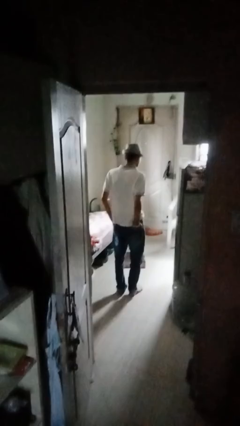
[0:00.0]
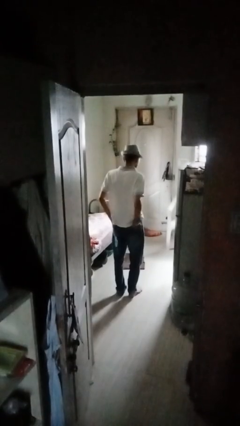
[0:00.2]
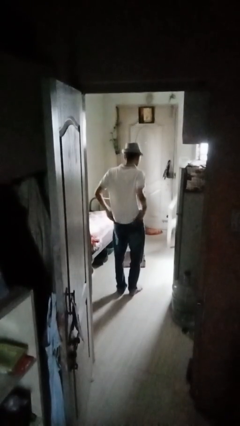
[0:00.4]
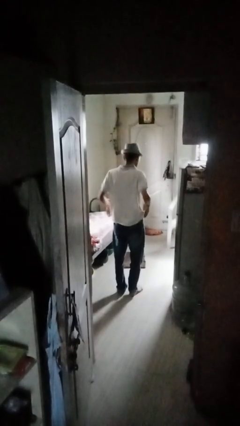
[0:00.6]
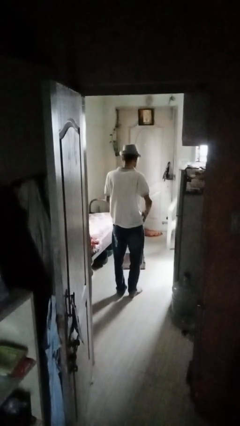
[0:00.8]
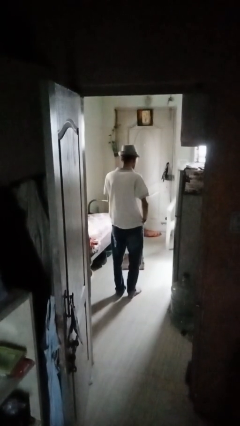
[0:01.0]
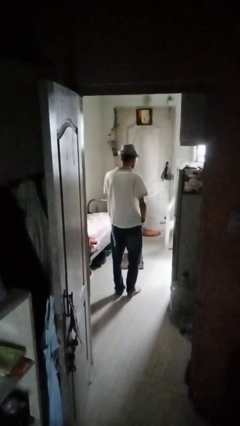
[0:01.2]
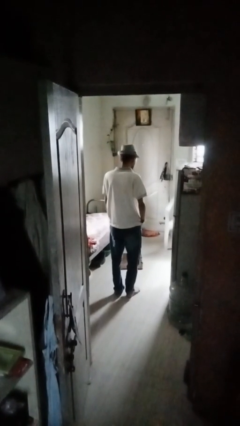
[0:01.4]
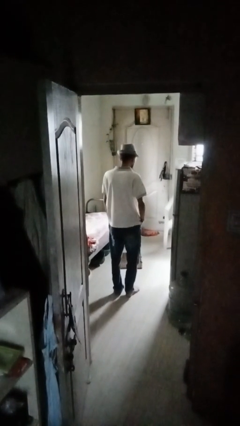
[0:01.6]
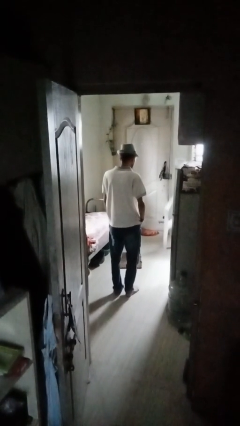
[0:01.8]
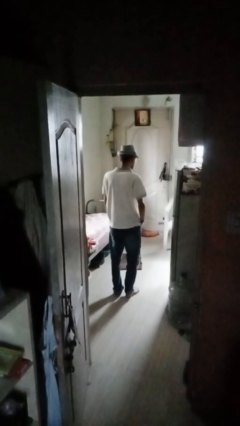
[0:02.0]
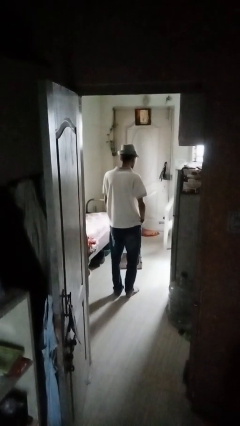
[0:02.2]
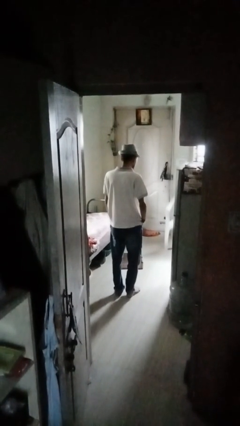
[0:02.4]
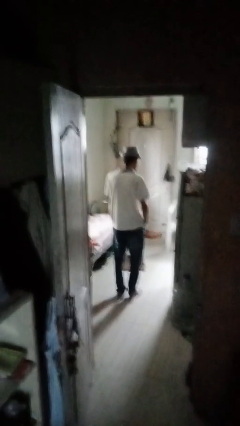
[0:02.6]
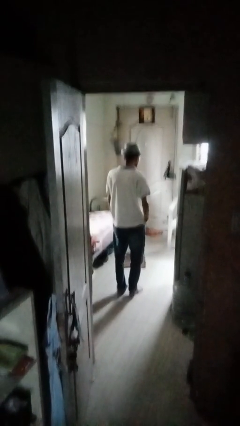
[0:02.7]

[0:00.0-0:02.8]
person puts hands in back pockets

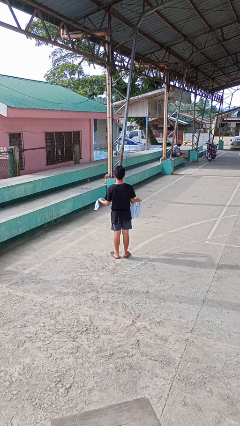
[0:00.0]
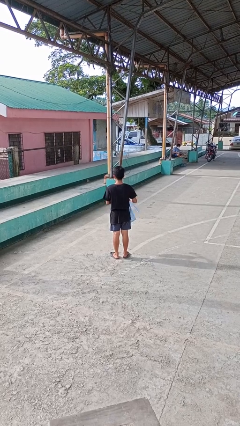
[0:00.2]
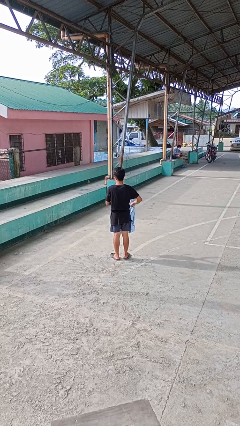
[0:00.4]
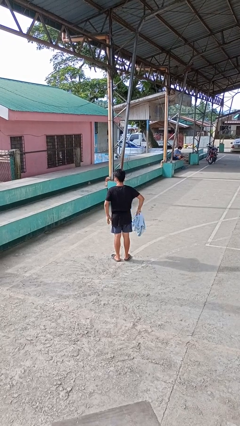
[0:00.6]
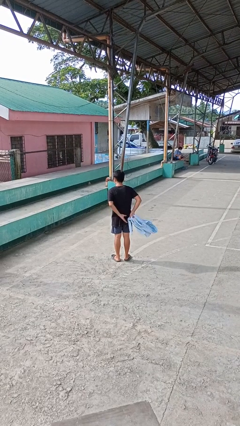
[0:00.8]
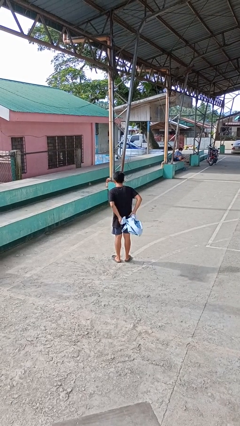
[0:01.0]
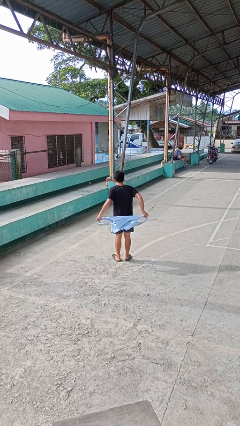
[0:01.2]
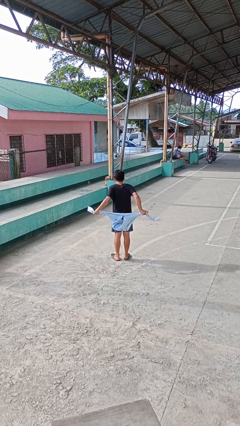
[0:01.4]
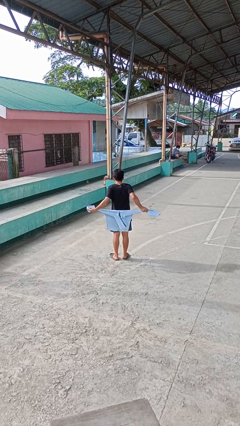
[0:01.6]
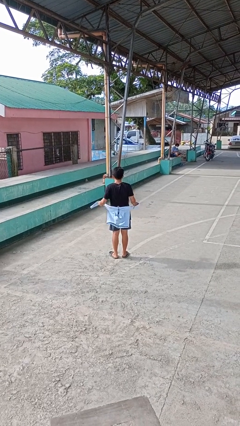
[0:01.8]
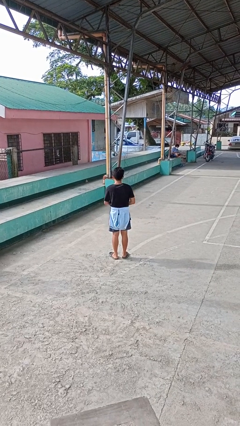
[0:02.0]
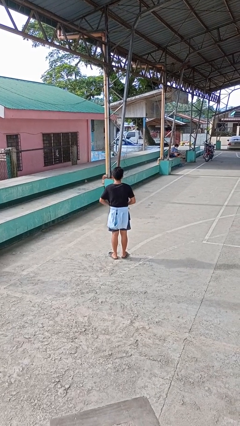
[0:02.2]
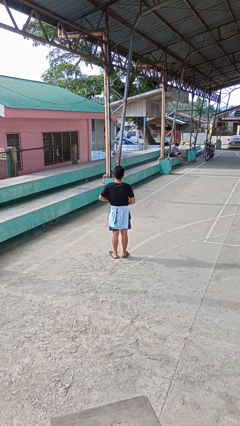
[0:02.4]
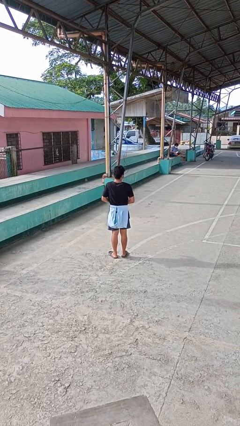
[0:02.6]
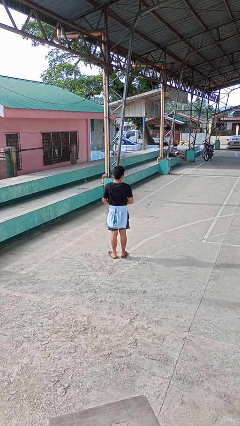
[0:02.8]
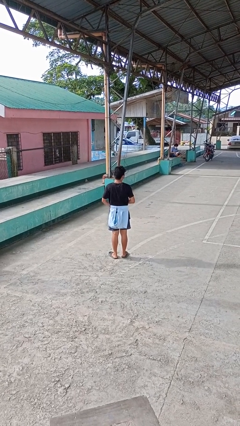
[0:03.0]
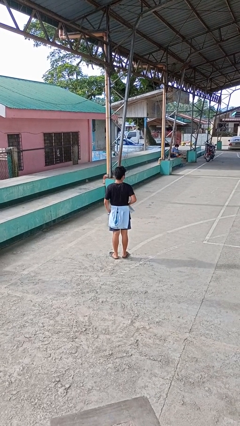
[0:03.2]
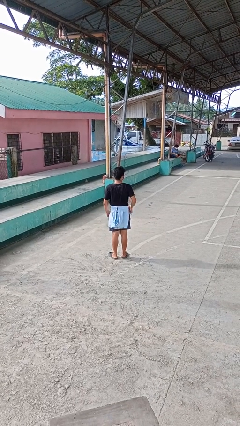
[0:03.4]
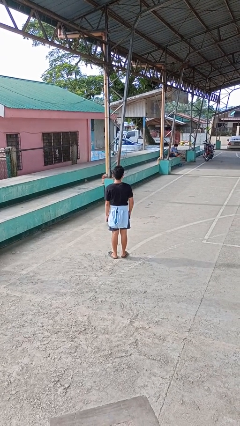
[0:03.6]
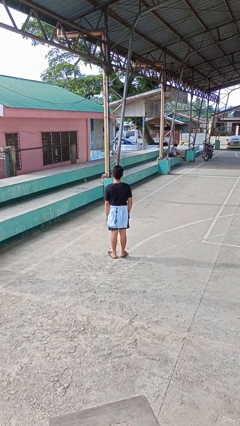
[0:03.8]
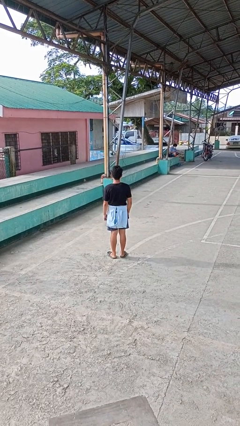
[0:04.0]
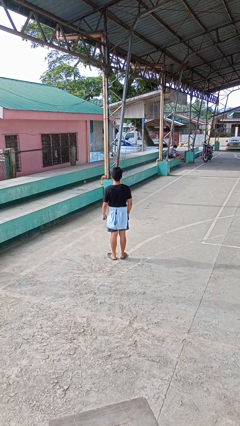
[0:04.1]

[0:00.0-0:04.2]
person ties jacket around waist

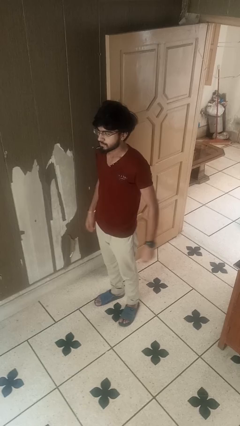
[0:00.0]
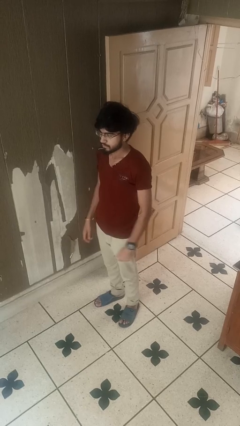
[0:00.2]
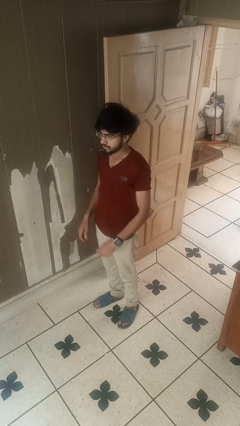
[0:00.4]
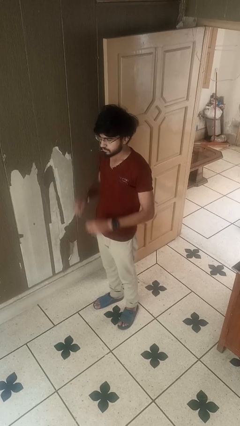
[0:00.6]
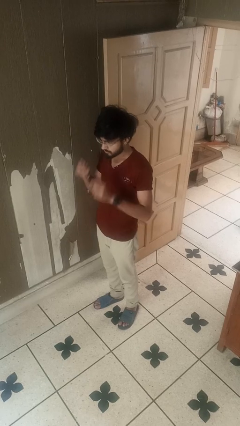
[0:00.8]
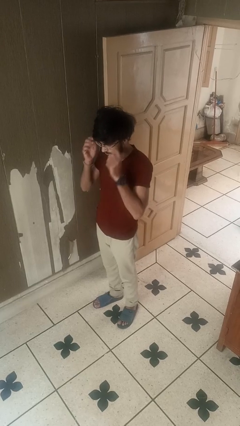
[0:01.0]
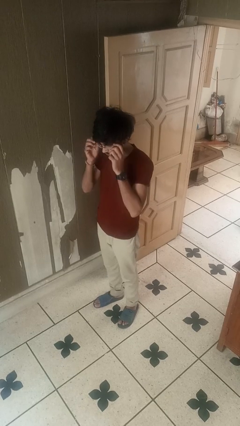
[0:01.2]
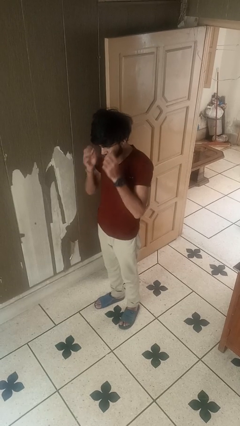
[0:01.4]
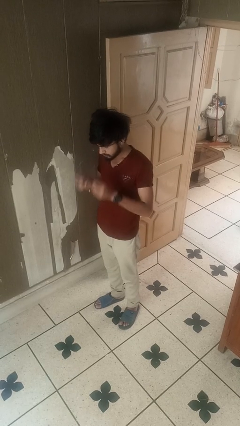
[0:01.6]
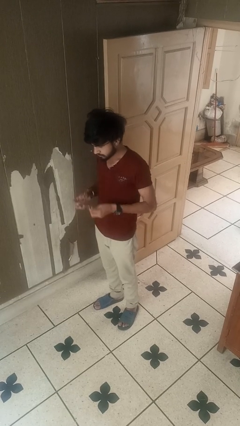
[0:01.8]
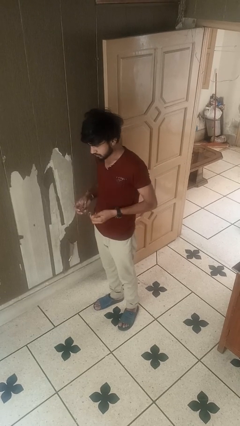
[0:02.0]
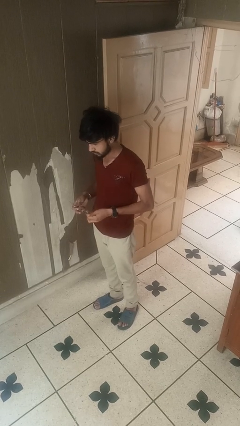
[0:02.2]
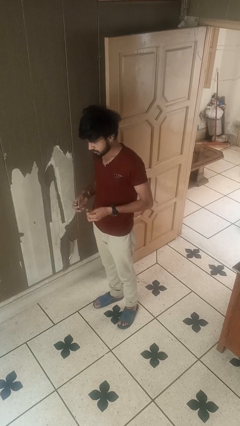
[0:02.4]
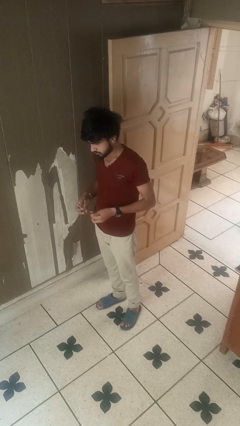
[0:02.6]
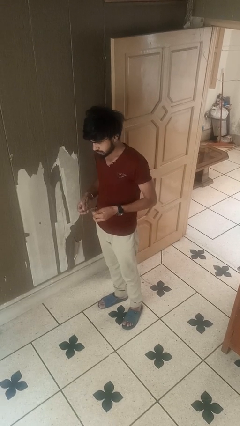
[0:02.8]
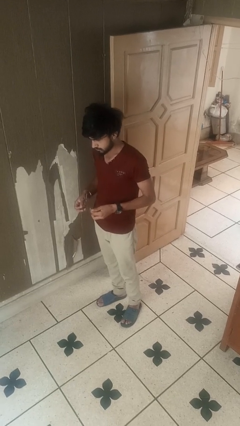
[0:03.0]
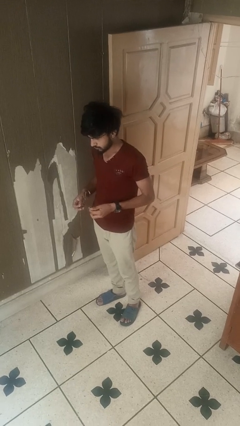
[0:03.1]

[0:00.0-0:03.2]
person takes off glasses

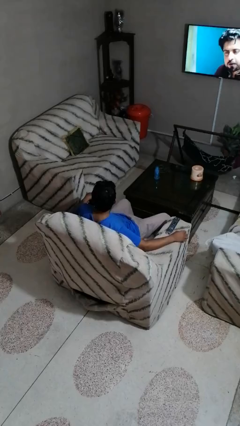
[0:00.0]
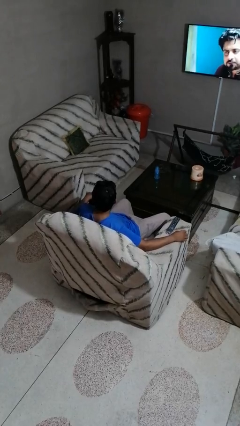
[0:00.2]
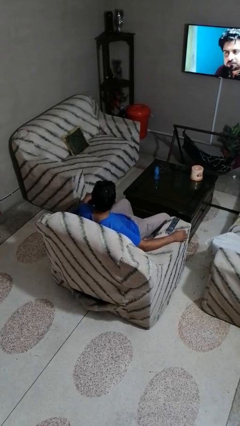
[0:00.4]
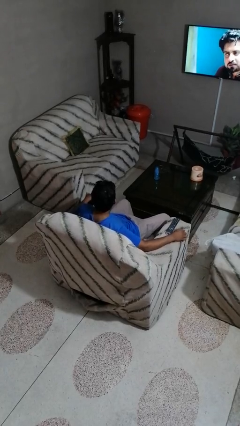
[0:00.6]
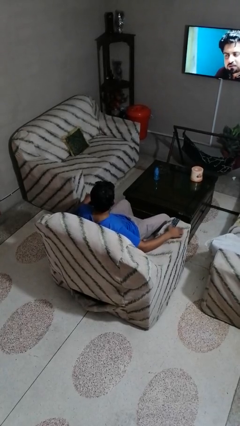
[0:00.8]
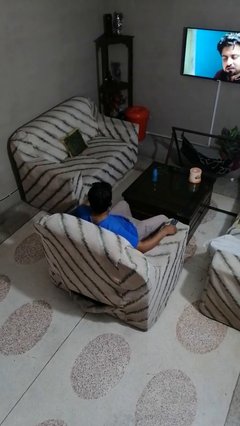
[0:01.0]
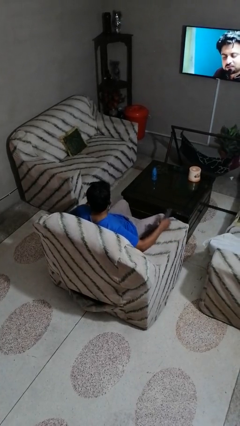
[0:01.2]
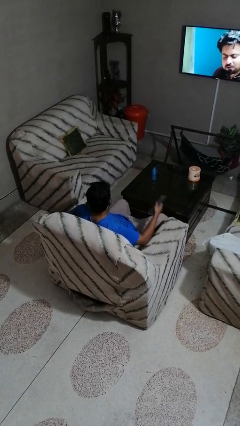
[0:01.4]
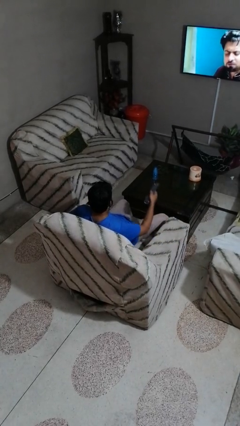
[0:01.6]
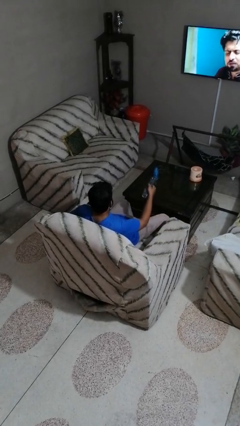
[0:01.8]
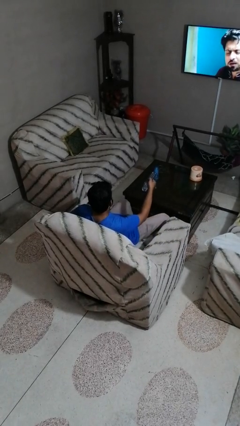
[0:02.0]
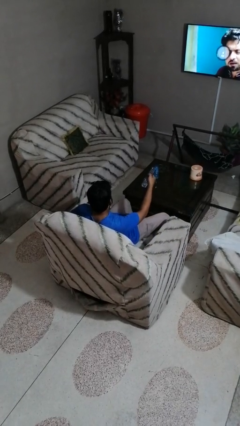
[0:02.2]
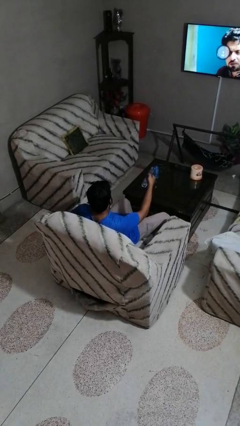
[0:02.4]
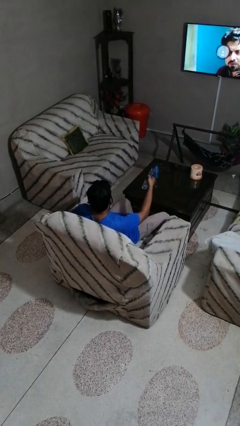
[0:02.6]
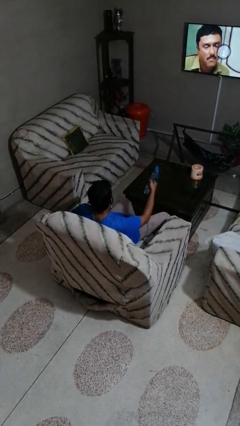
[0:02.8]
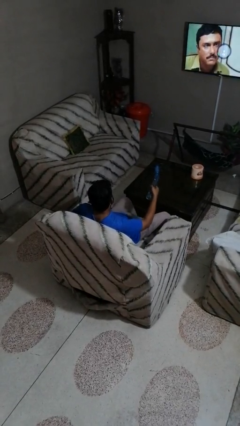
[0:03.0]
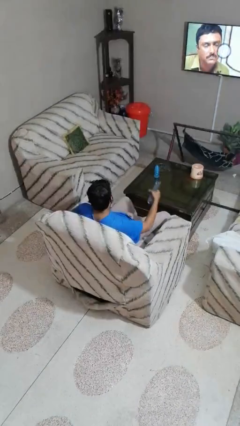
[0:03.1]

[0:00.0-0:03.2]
person uses television remote

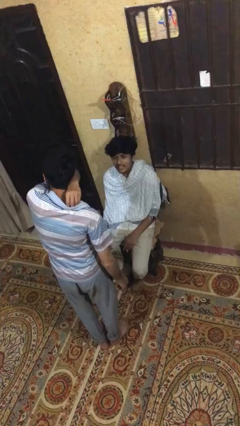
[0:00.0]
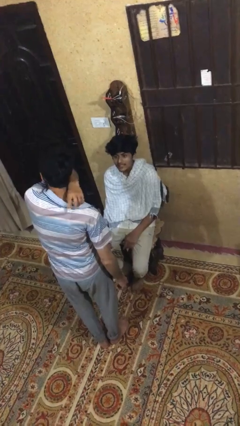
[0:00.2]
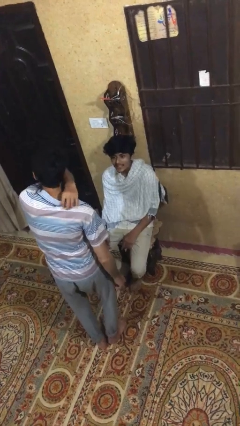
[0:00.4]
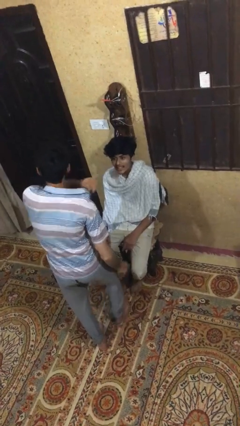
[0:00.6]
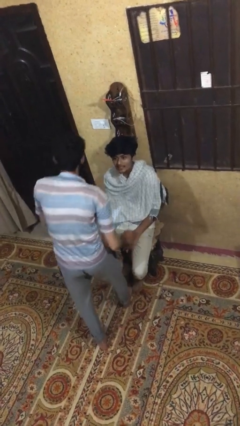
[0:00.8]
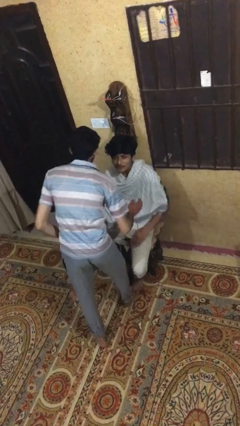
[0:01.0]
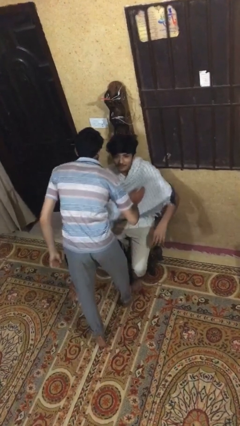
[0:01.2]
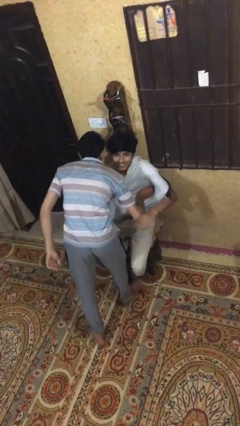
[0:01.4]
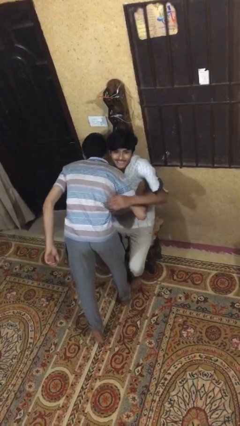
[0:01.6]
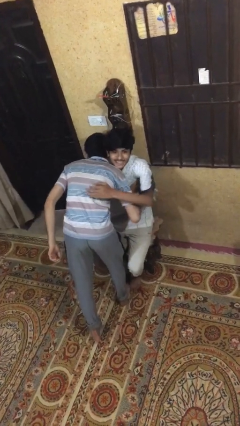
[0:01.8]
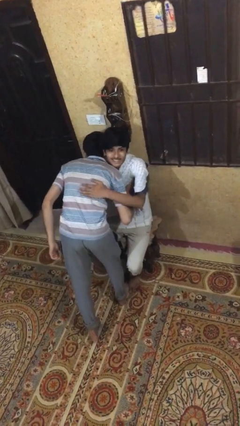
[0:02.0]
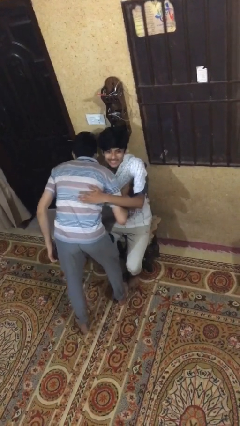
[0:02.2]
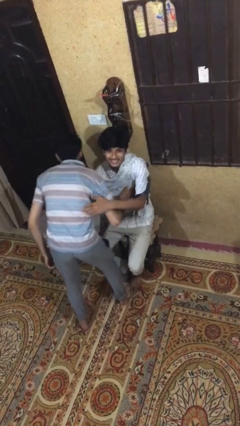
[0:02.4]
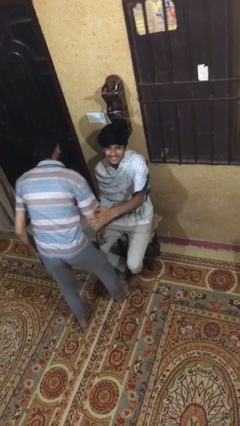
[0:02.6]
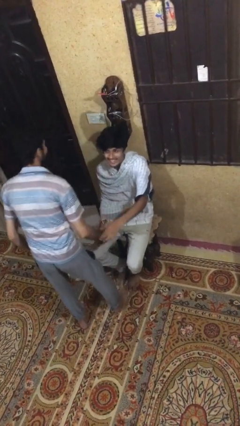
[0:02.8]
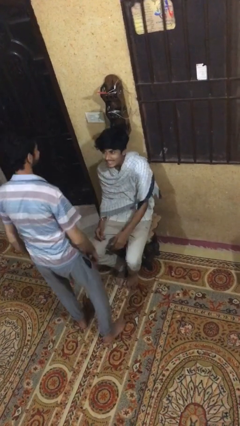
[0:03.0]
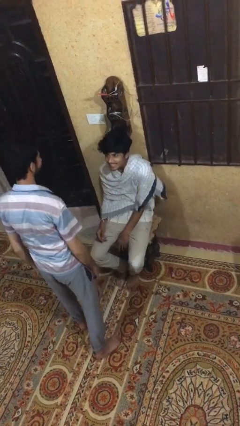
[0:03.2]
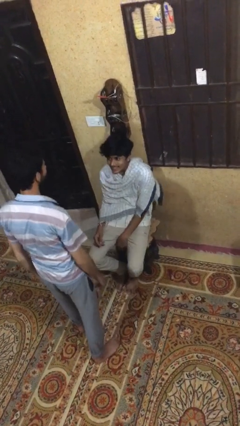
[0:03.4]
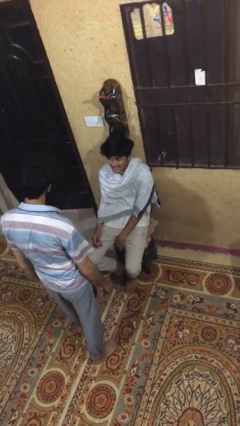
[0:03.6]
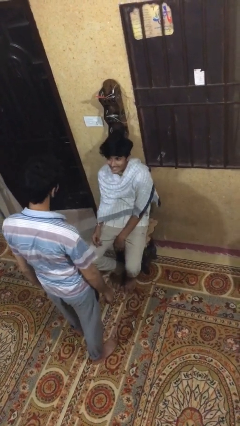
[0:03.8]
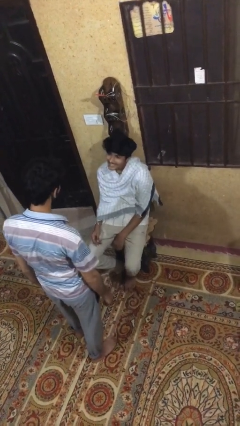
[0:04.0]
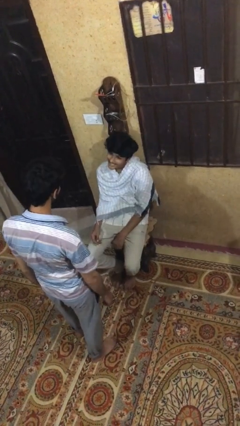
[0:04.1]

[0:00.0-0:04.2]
person embraces person
